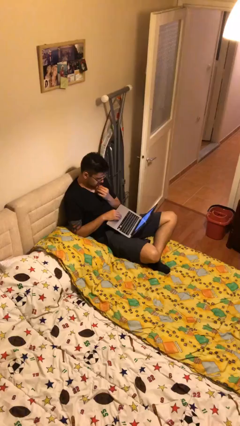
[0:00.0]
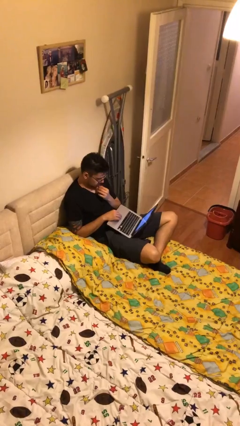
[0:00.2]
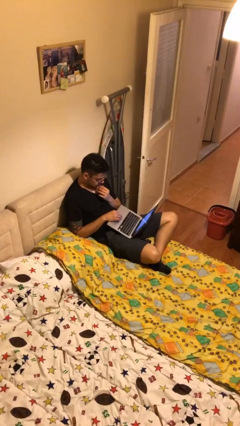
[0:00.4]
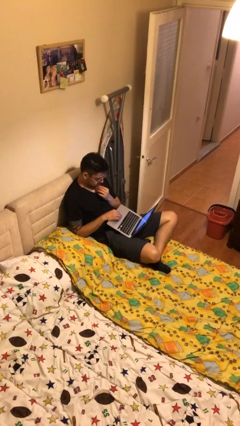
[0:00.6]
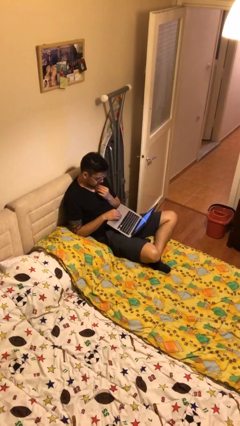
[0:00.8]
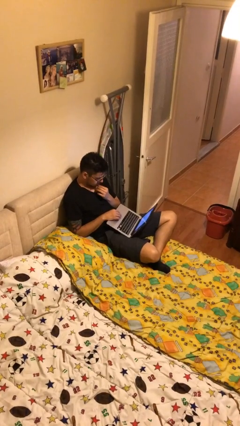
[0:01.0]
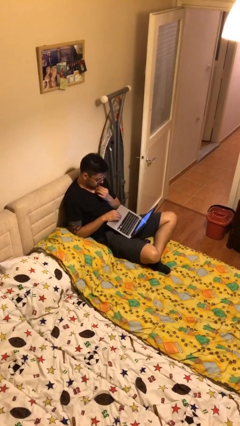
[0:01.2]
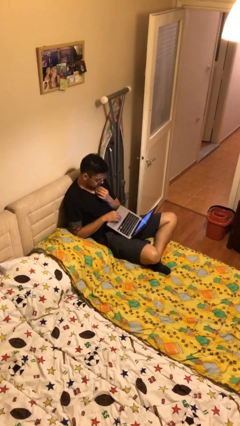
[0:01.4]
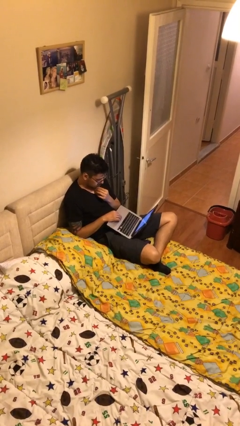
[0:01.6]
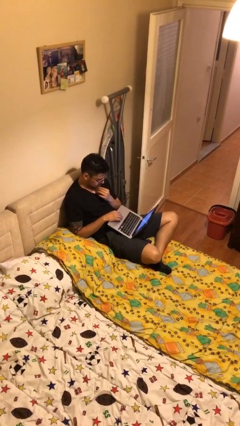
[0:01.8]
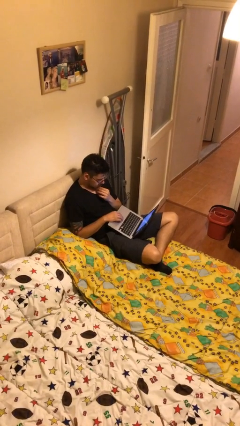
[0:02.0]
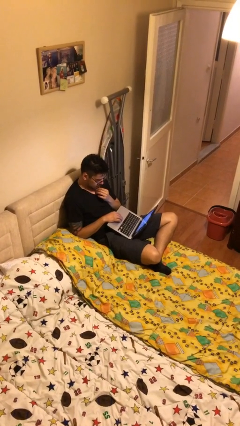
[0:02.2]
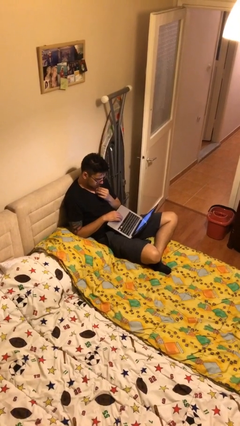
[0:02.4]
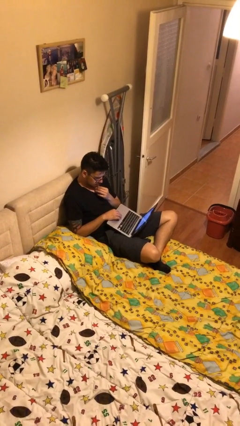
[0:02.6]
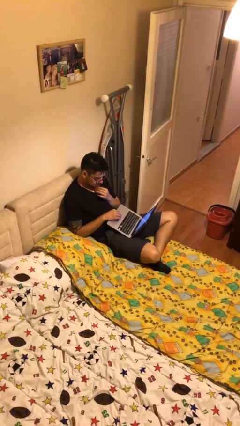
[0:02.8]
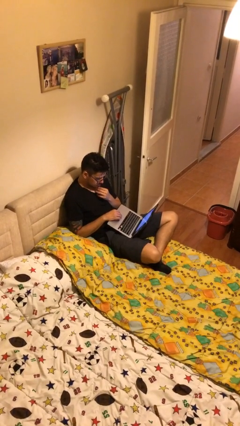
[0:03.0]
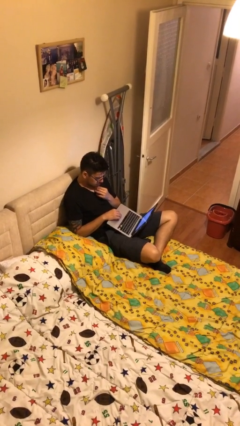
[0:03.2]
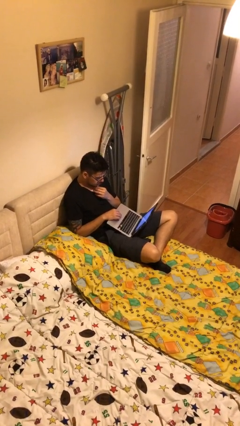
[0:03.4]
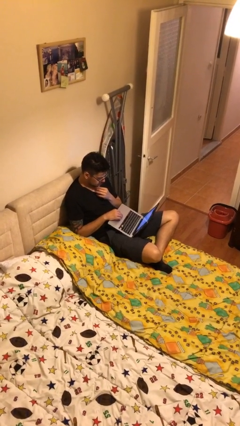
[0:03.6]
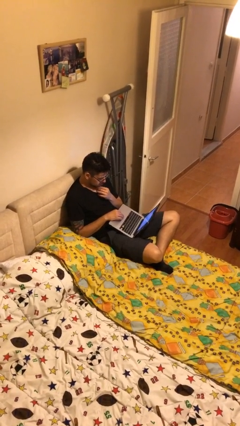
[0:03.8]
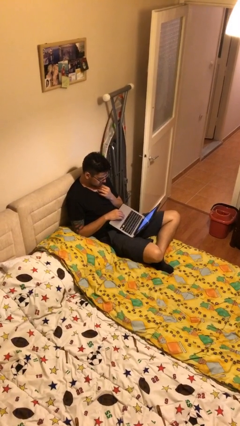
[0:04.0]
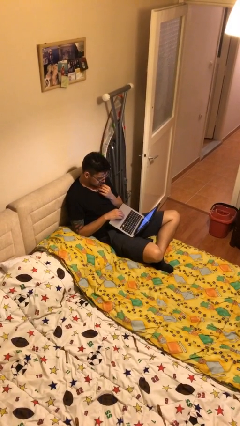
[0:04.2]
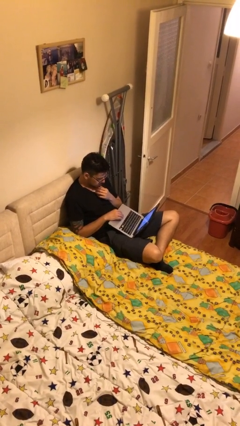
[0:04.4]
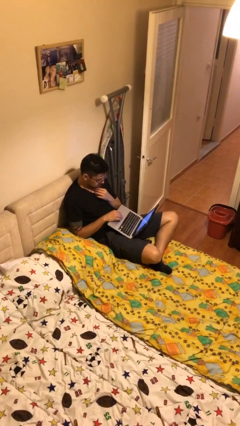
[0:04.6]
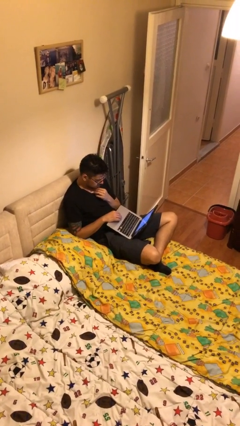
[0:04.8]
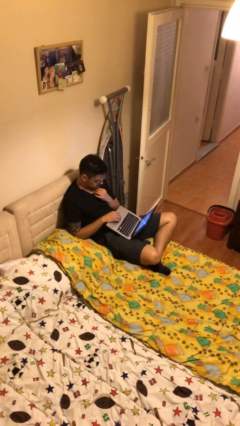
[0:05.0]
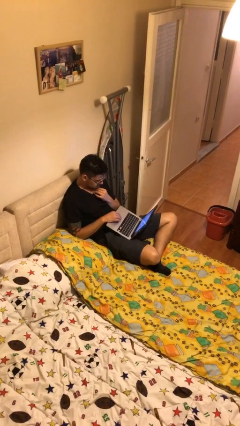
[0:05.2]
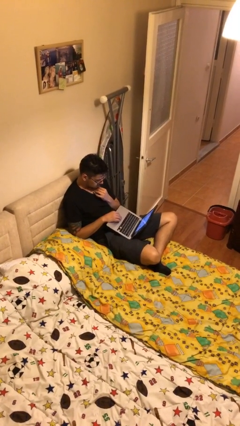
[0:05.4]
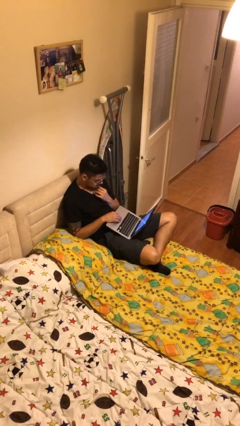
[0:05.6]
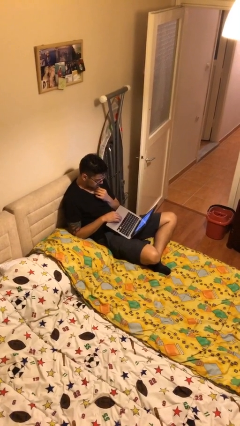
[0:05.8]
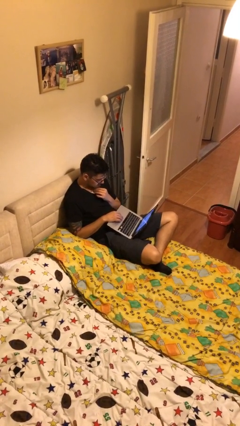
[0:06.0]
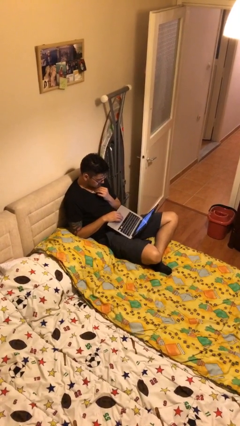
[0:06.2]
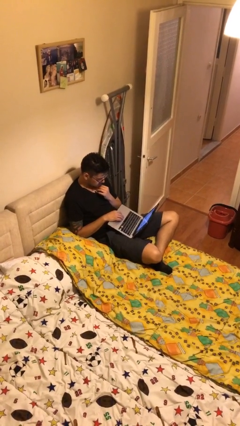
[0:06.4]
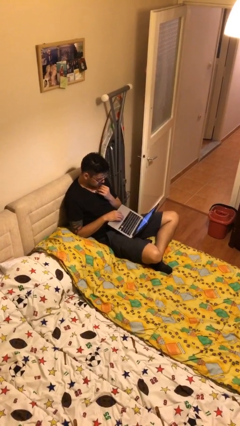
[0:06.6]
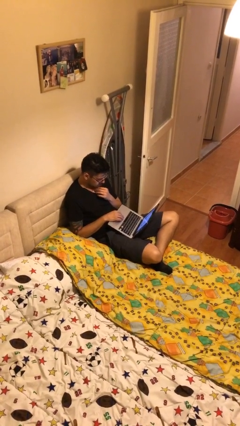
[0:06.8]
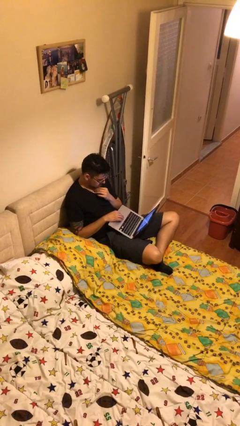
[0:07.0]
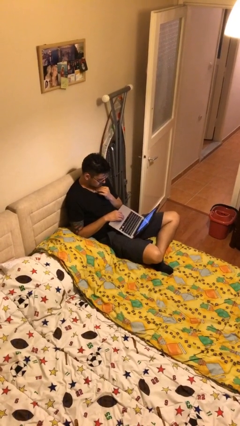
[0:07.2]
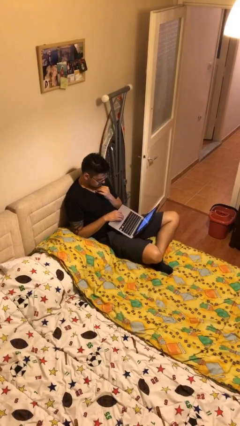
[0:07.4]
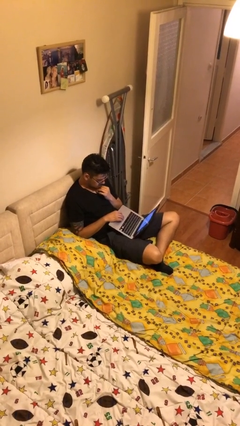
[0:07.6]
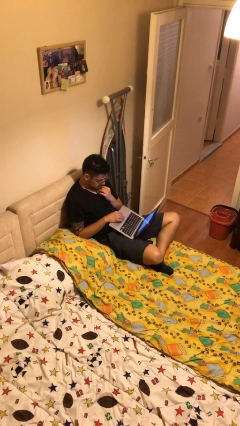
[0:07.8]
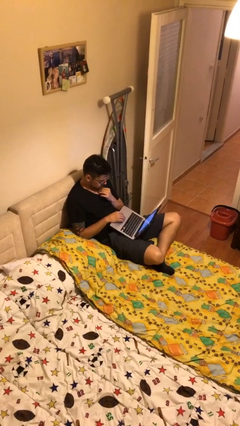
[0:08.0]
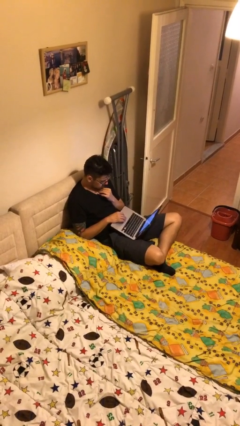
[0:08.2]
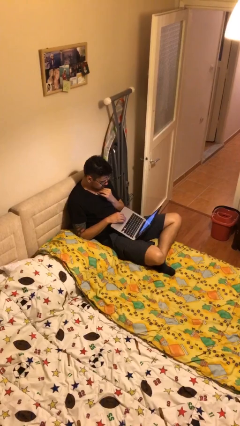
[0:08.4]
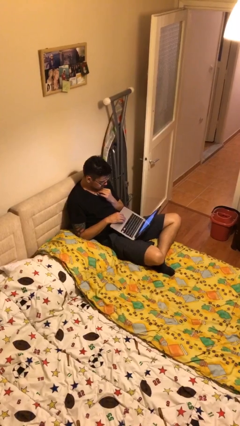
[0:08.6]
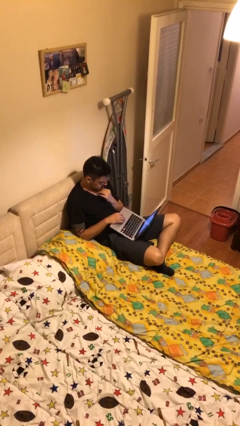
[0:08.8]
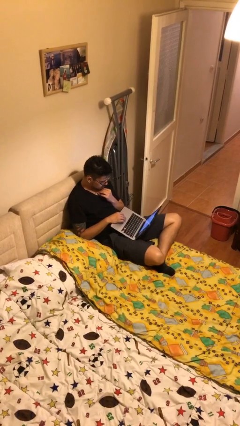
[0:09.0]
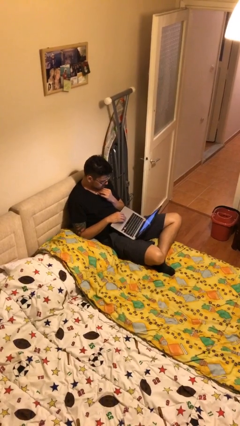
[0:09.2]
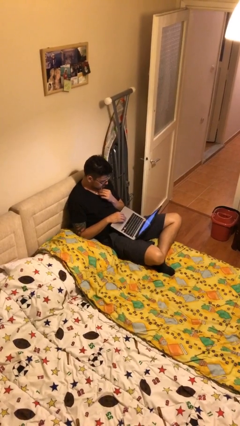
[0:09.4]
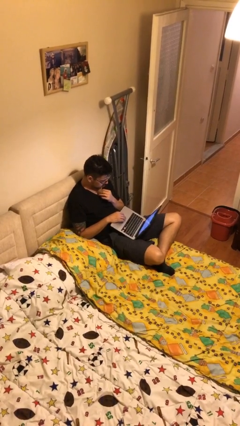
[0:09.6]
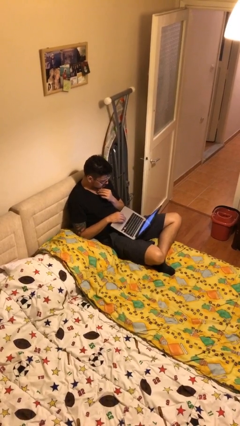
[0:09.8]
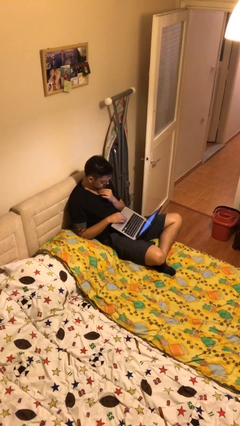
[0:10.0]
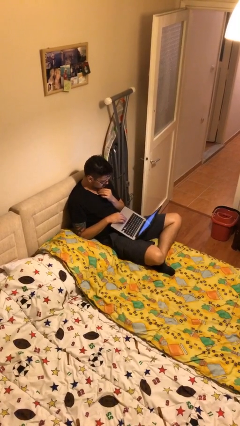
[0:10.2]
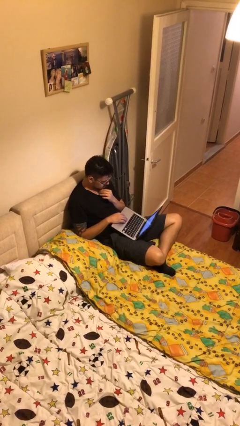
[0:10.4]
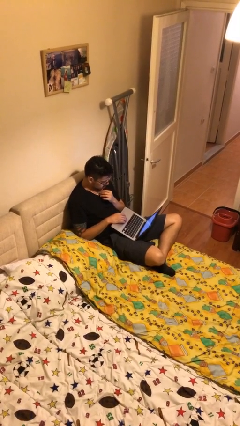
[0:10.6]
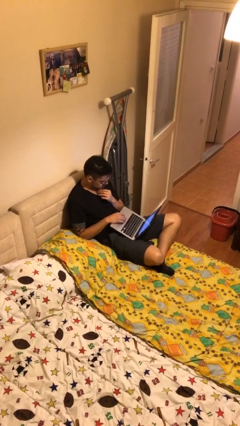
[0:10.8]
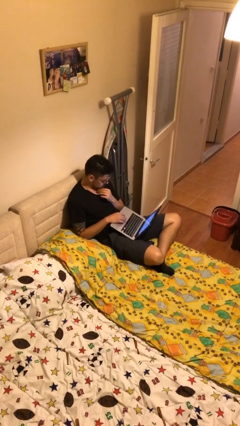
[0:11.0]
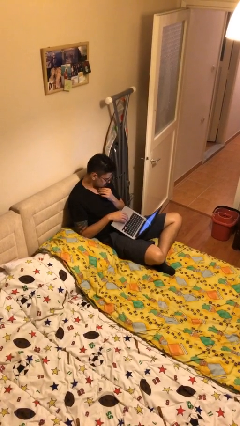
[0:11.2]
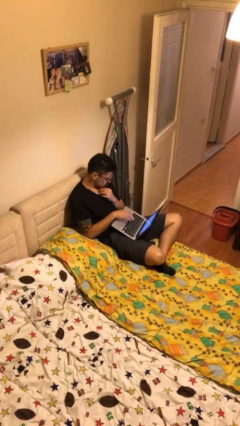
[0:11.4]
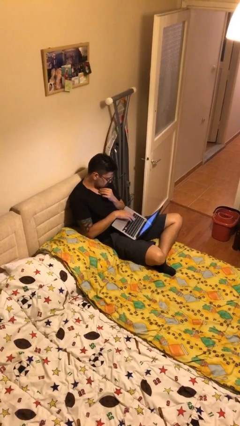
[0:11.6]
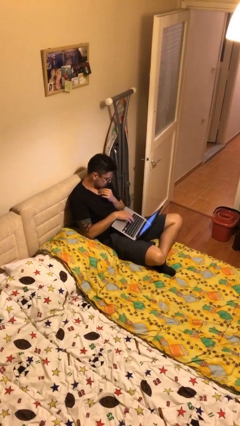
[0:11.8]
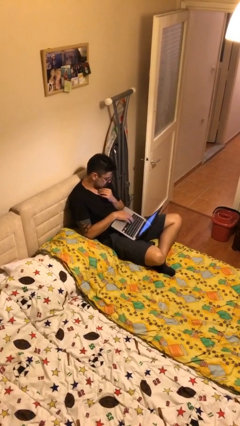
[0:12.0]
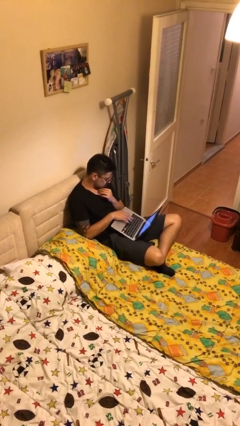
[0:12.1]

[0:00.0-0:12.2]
person interacts with laptop

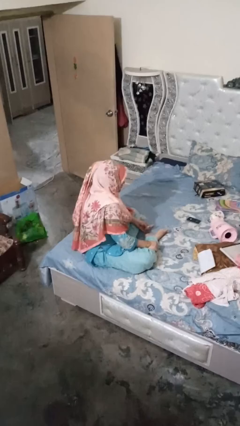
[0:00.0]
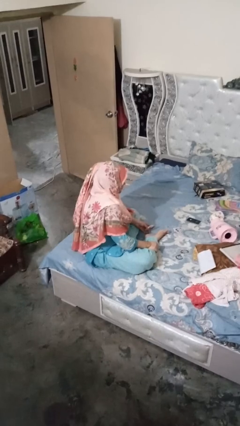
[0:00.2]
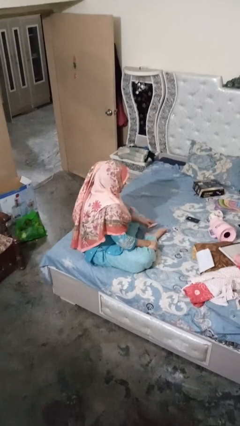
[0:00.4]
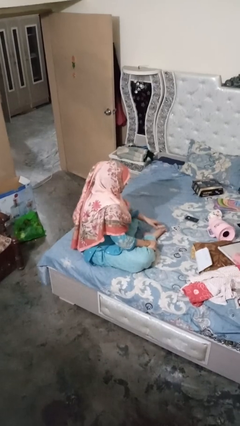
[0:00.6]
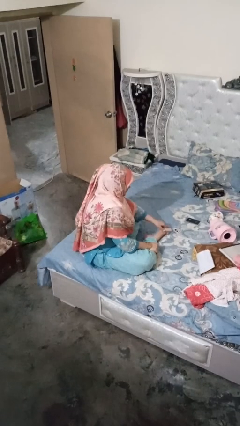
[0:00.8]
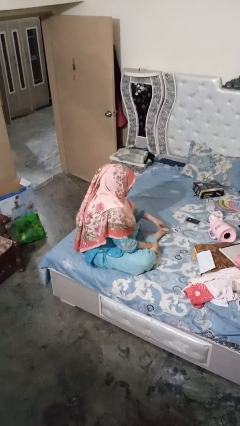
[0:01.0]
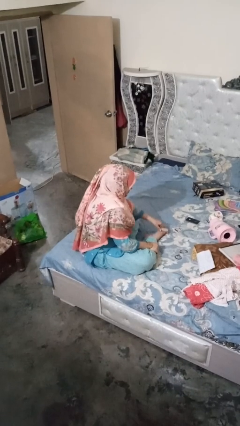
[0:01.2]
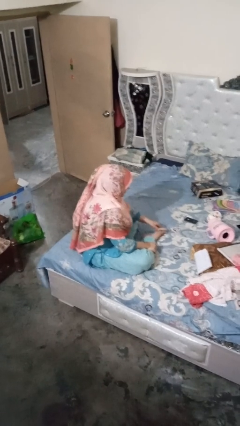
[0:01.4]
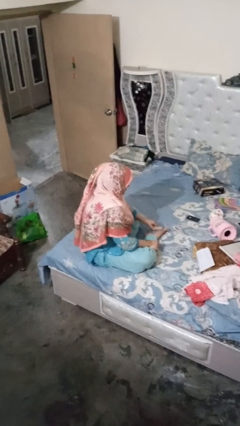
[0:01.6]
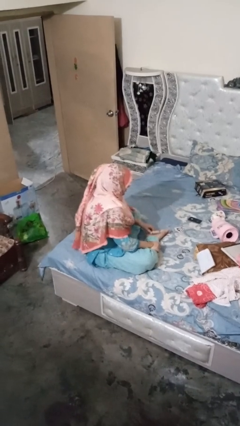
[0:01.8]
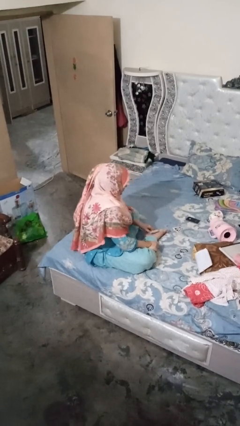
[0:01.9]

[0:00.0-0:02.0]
person rubs foot

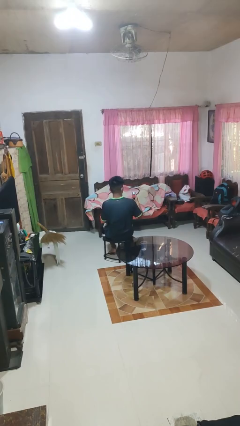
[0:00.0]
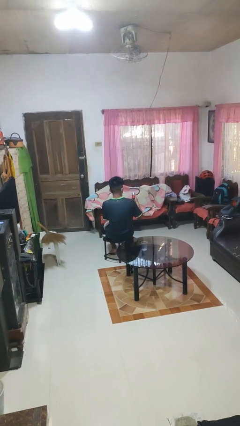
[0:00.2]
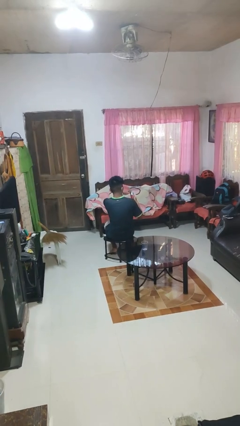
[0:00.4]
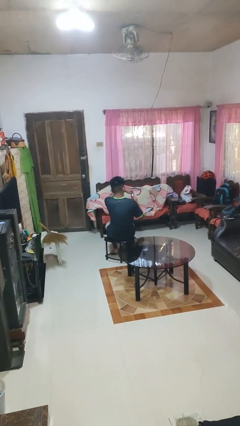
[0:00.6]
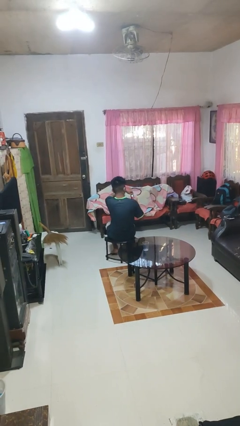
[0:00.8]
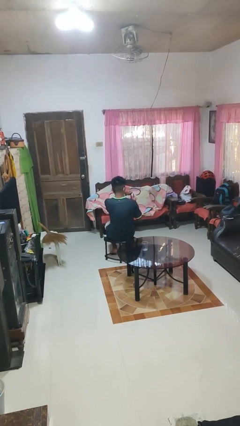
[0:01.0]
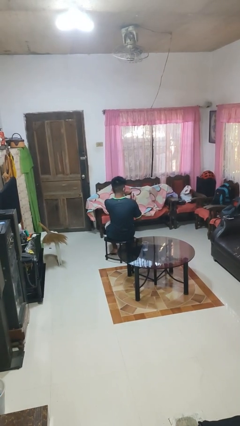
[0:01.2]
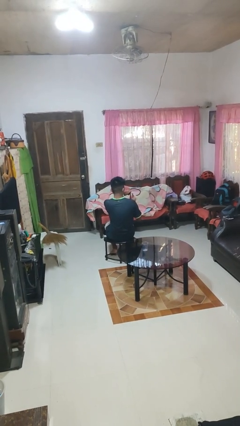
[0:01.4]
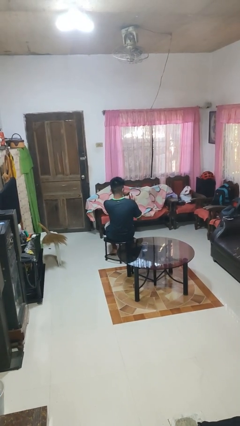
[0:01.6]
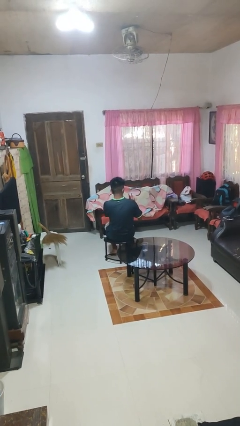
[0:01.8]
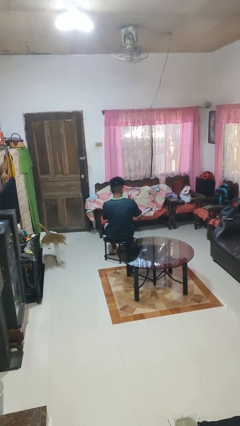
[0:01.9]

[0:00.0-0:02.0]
person opens beverage can

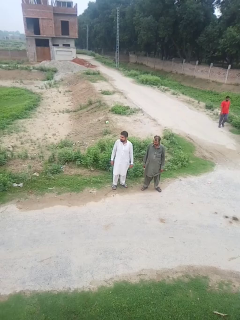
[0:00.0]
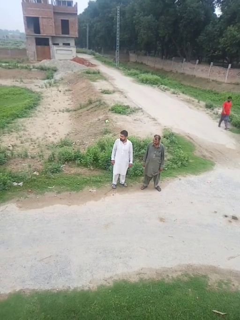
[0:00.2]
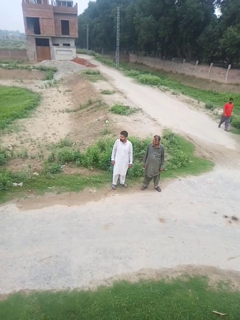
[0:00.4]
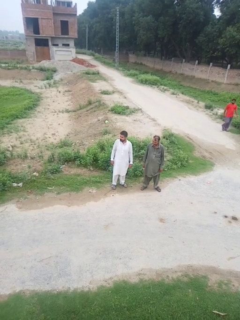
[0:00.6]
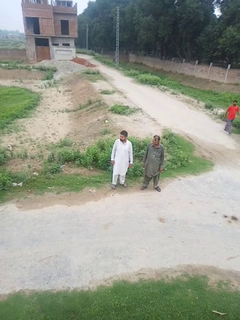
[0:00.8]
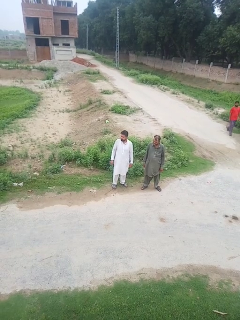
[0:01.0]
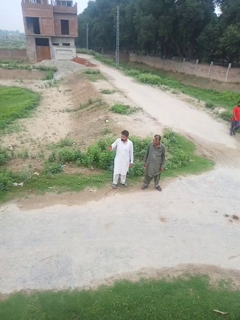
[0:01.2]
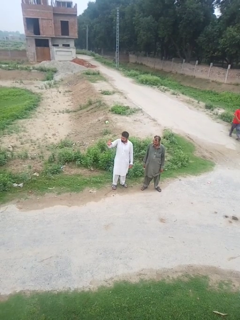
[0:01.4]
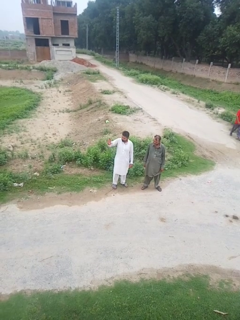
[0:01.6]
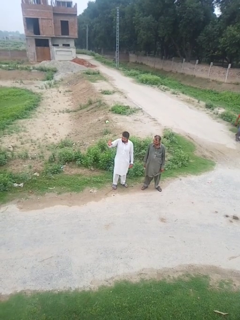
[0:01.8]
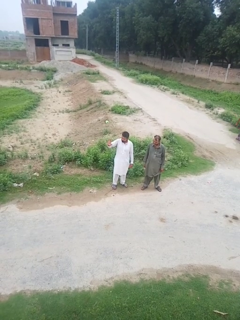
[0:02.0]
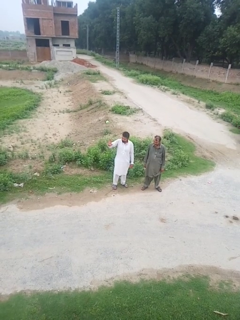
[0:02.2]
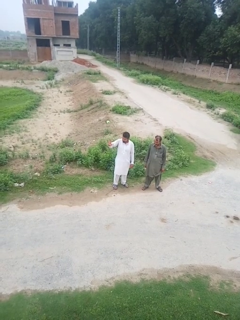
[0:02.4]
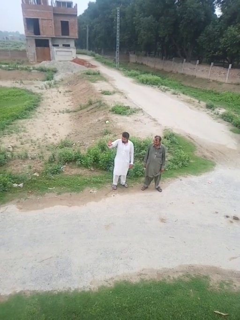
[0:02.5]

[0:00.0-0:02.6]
person waves at person
